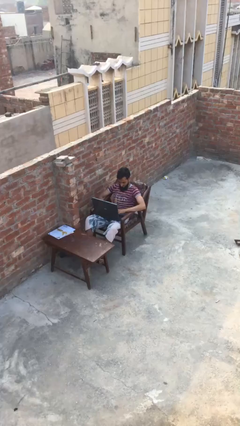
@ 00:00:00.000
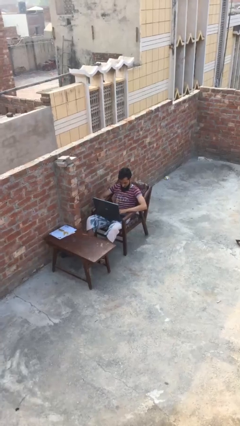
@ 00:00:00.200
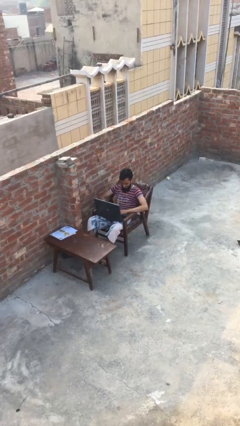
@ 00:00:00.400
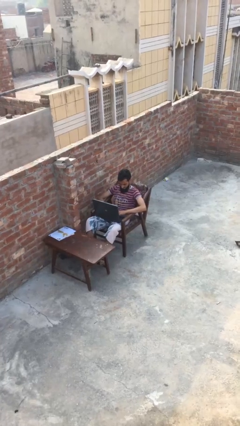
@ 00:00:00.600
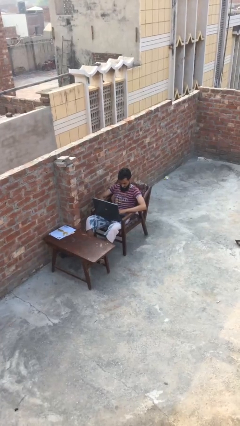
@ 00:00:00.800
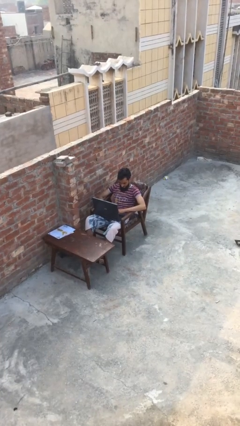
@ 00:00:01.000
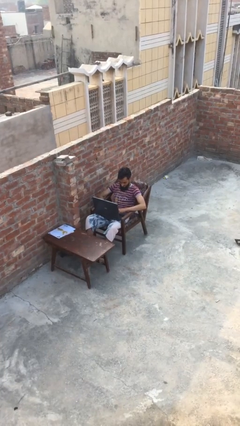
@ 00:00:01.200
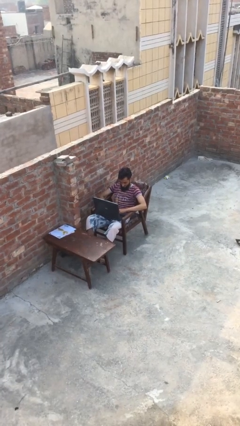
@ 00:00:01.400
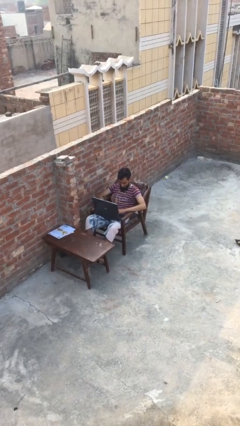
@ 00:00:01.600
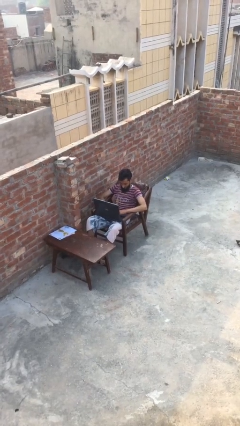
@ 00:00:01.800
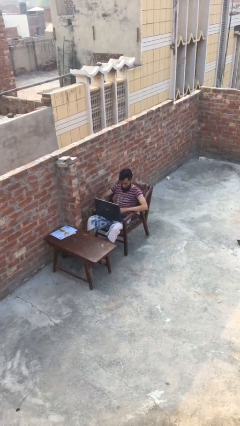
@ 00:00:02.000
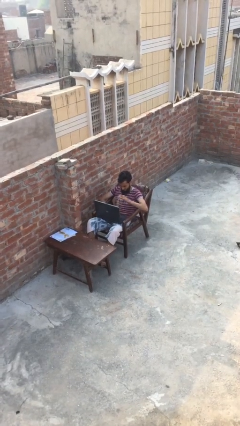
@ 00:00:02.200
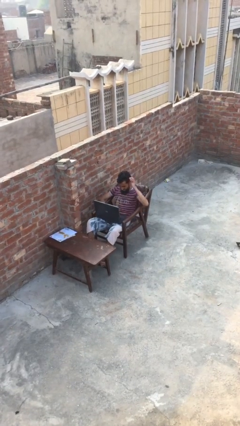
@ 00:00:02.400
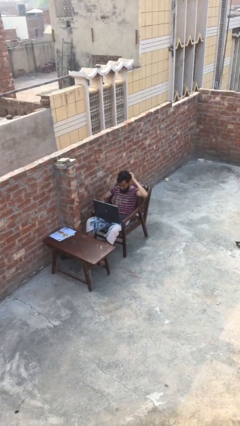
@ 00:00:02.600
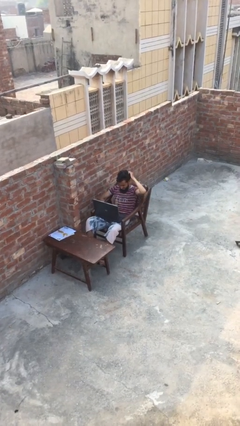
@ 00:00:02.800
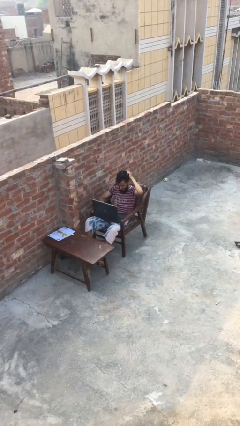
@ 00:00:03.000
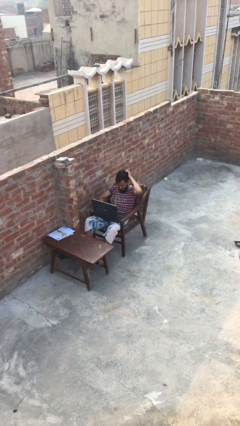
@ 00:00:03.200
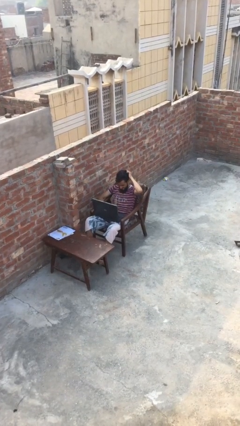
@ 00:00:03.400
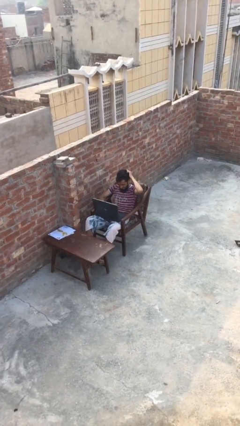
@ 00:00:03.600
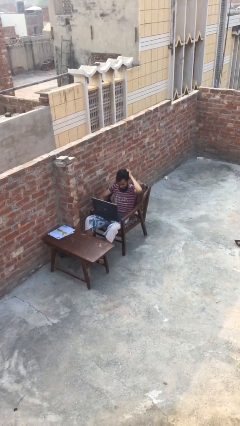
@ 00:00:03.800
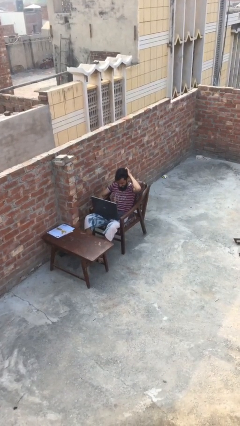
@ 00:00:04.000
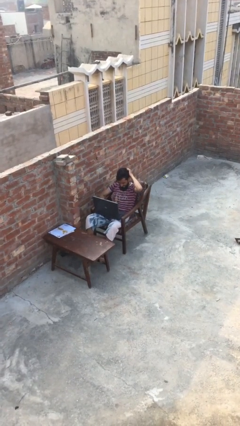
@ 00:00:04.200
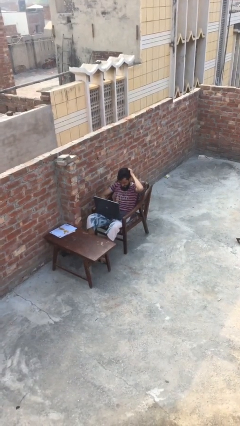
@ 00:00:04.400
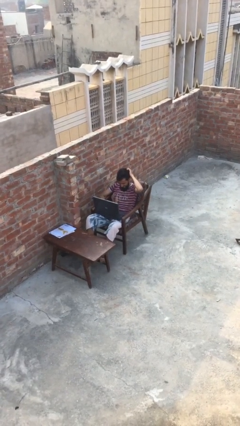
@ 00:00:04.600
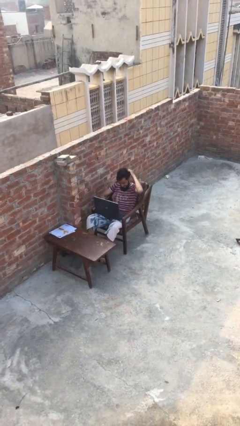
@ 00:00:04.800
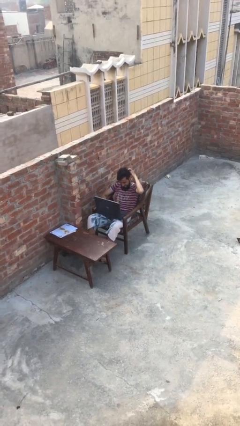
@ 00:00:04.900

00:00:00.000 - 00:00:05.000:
person interacts with laptop

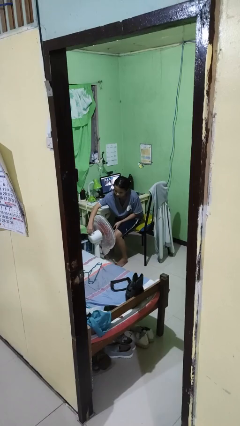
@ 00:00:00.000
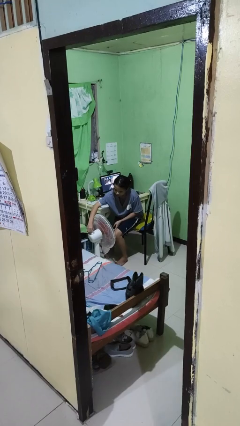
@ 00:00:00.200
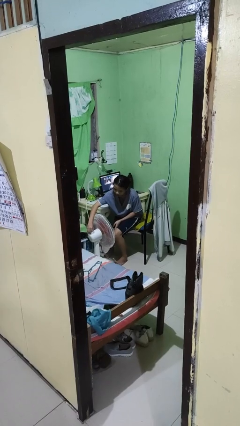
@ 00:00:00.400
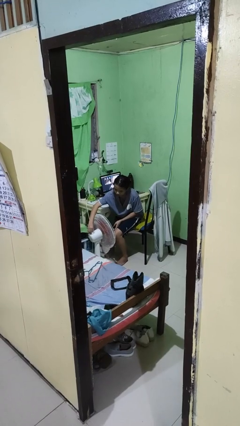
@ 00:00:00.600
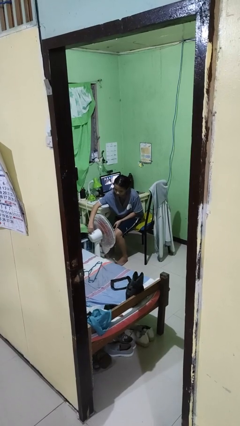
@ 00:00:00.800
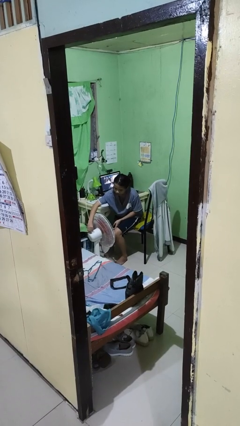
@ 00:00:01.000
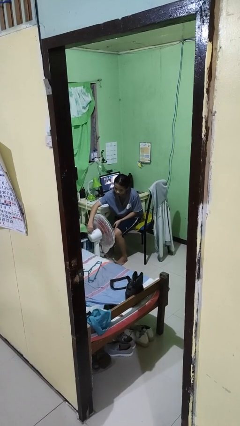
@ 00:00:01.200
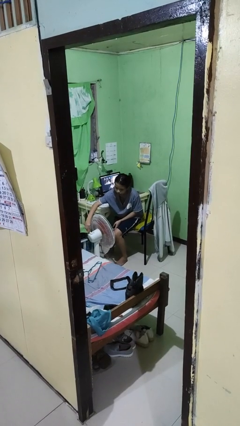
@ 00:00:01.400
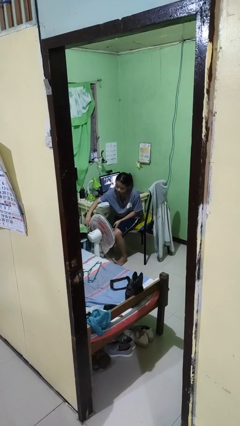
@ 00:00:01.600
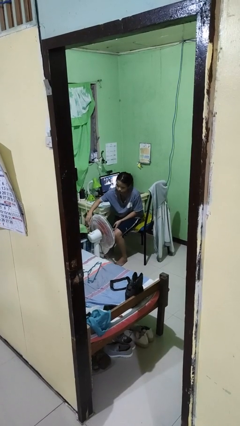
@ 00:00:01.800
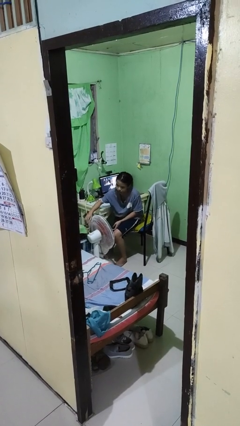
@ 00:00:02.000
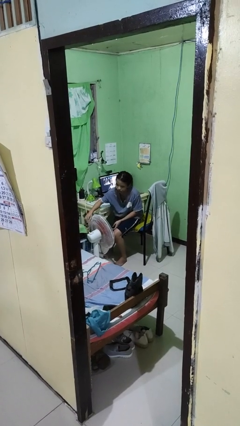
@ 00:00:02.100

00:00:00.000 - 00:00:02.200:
person turns off fan

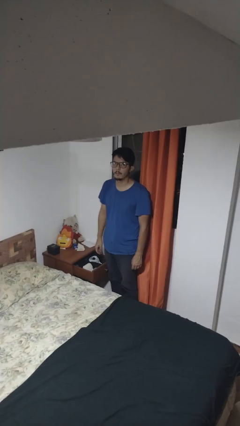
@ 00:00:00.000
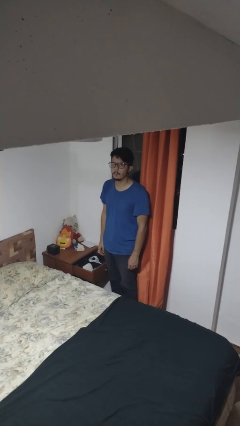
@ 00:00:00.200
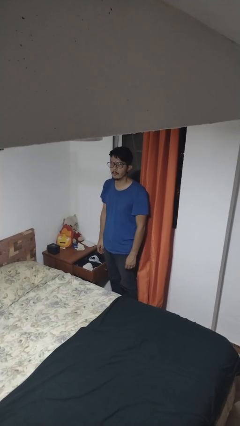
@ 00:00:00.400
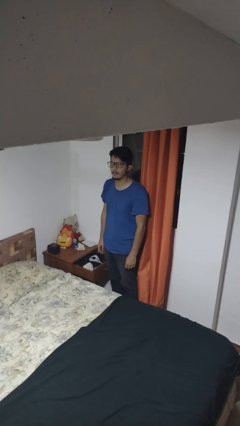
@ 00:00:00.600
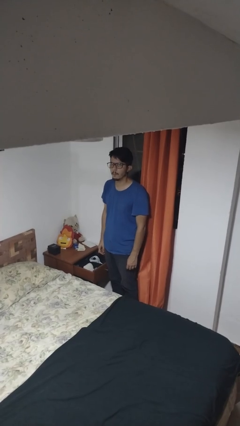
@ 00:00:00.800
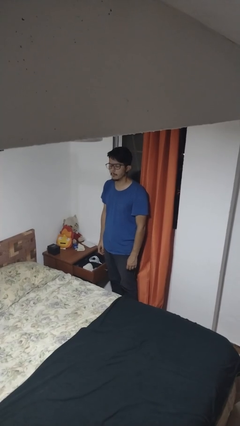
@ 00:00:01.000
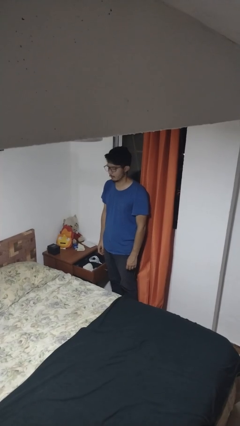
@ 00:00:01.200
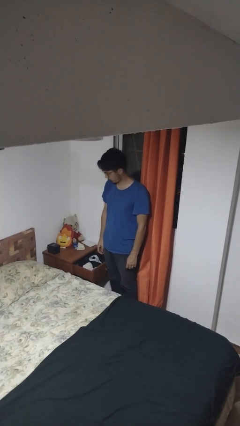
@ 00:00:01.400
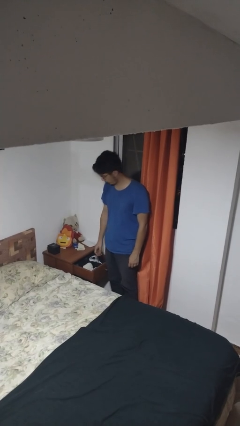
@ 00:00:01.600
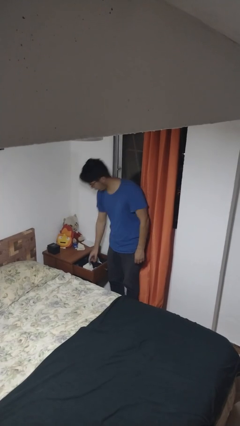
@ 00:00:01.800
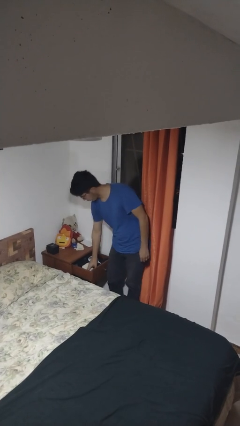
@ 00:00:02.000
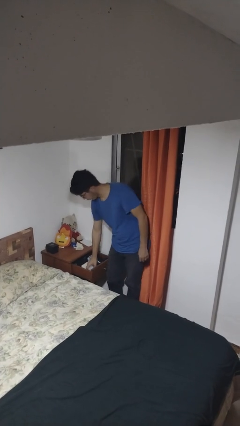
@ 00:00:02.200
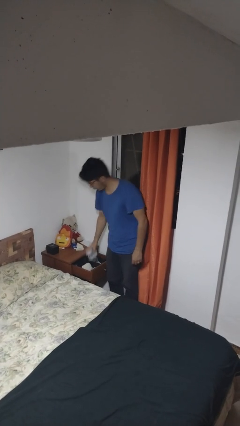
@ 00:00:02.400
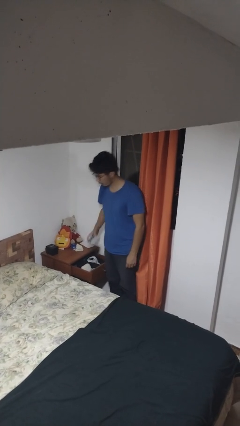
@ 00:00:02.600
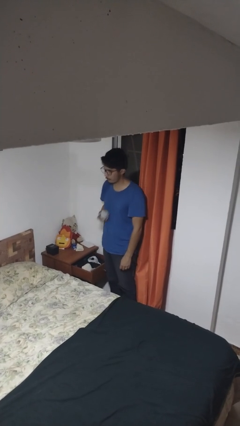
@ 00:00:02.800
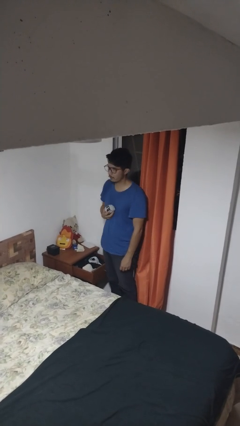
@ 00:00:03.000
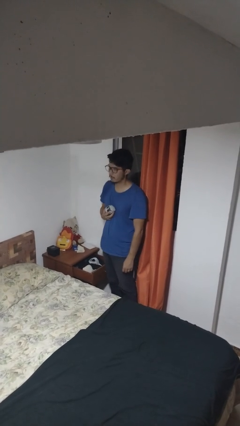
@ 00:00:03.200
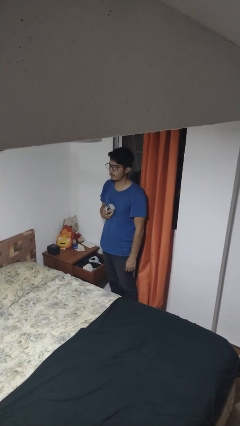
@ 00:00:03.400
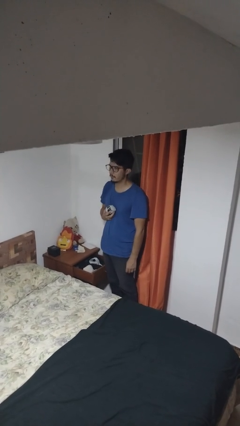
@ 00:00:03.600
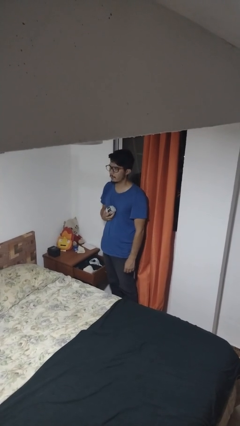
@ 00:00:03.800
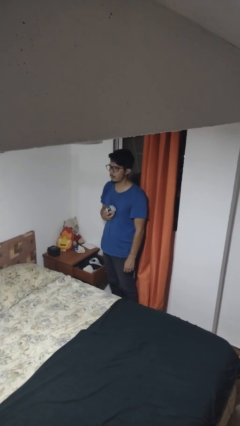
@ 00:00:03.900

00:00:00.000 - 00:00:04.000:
person takes clothes from dresser

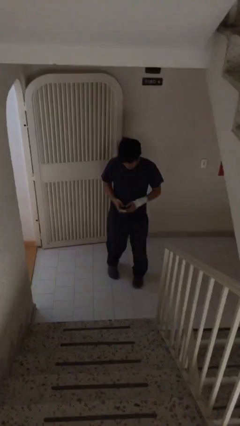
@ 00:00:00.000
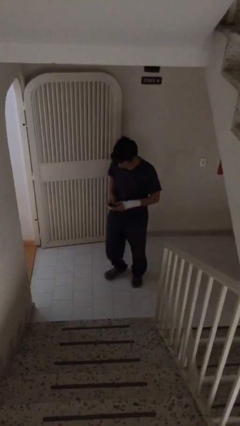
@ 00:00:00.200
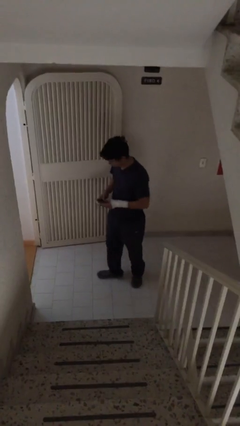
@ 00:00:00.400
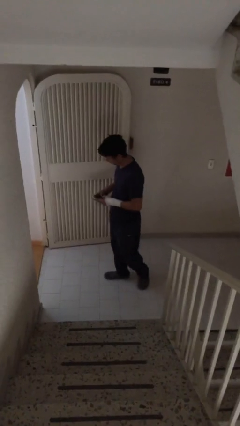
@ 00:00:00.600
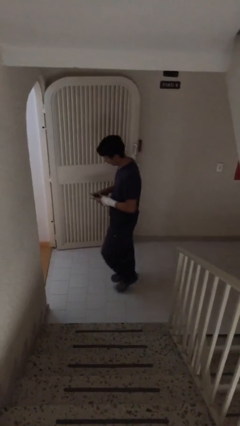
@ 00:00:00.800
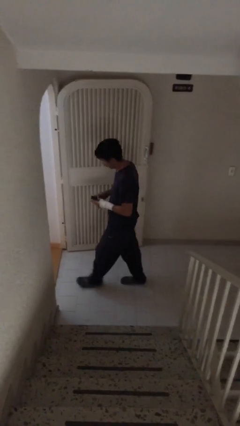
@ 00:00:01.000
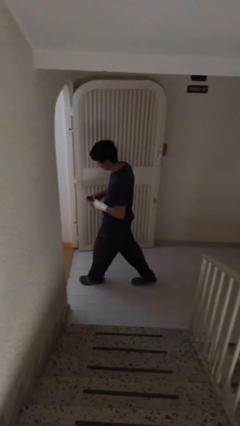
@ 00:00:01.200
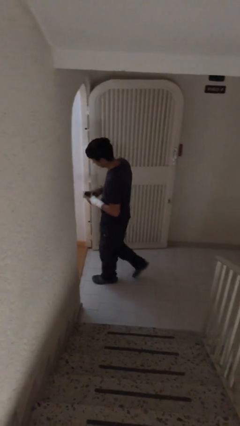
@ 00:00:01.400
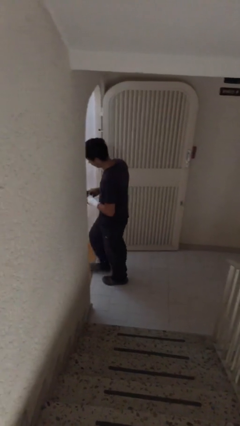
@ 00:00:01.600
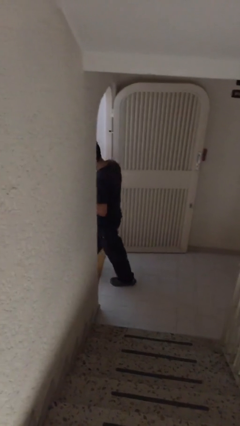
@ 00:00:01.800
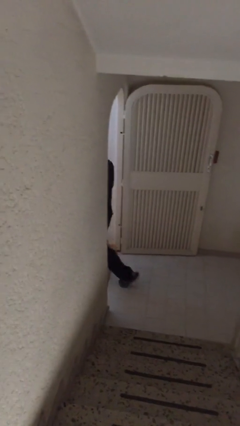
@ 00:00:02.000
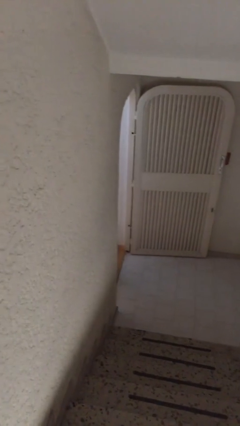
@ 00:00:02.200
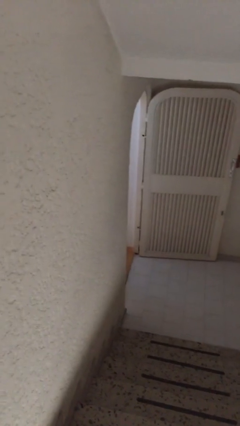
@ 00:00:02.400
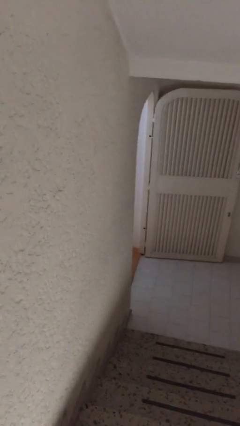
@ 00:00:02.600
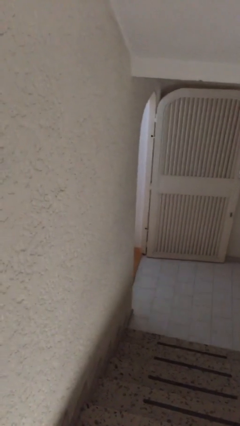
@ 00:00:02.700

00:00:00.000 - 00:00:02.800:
person exits scene through structure

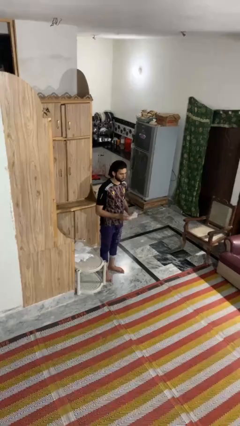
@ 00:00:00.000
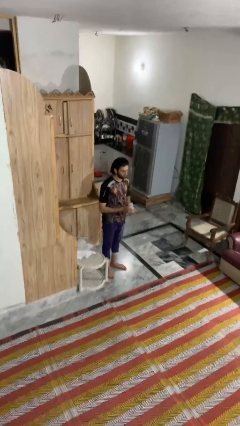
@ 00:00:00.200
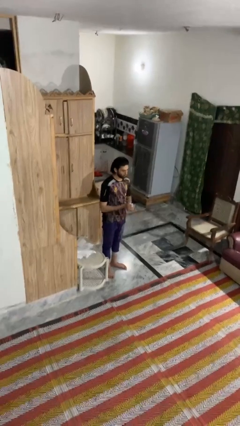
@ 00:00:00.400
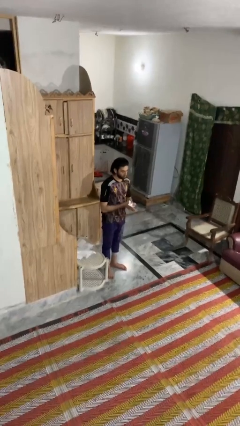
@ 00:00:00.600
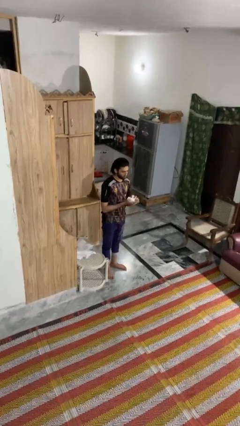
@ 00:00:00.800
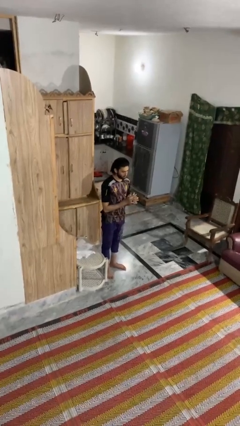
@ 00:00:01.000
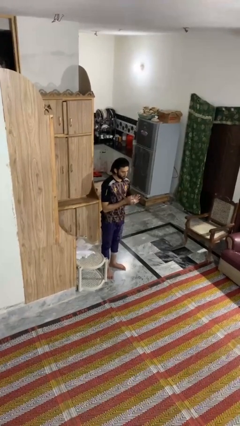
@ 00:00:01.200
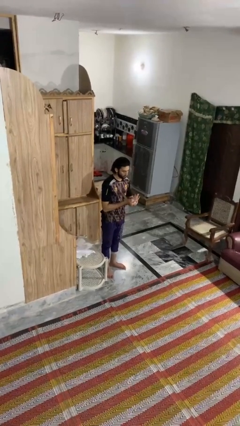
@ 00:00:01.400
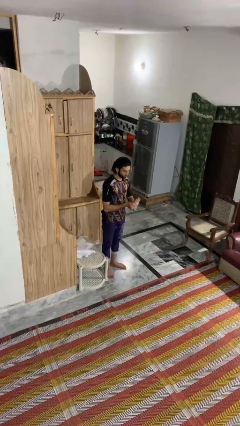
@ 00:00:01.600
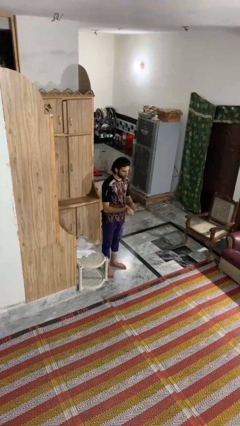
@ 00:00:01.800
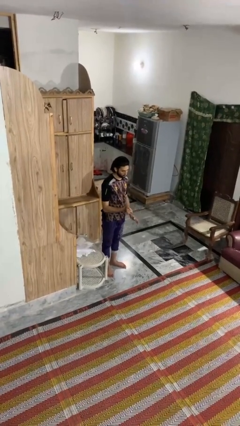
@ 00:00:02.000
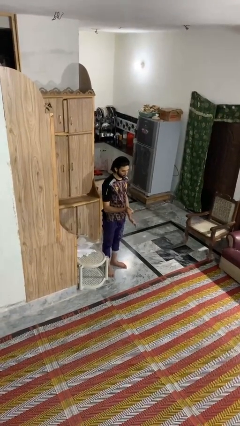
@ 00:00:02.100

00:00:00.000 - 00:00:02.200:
person crumples paper

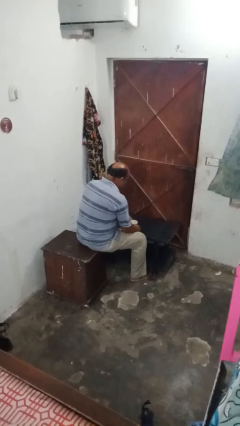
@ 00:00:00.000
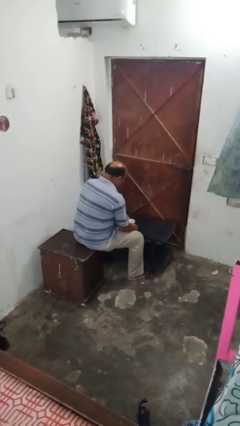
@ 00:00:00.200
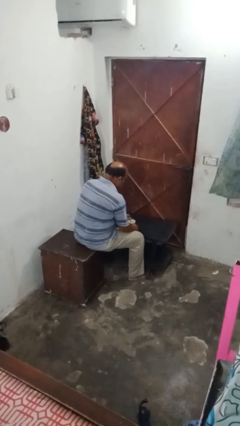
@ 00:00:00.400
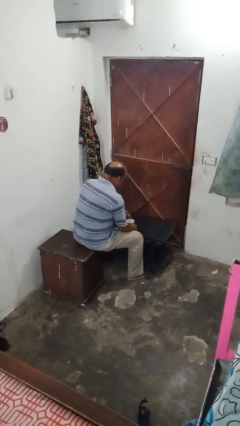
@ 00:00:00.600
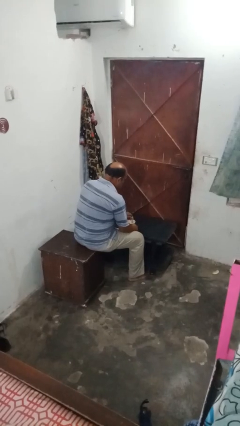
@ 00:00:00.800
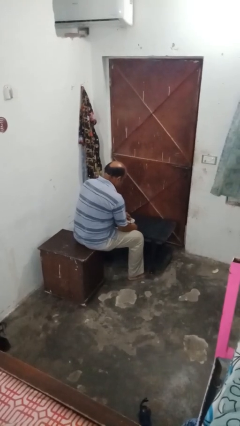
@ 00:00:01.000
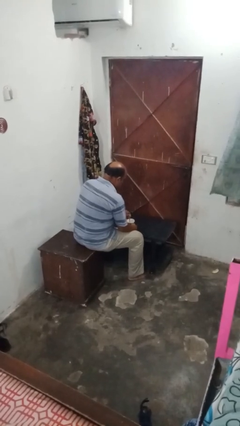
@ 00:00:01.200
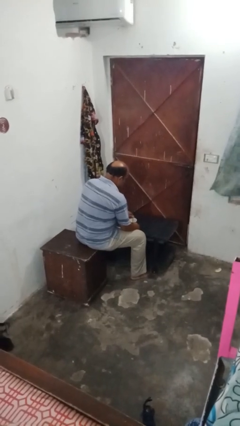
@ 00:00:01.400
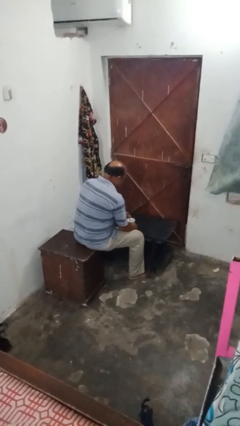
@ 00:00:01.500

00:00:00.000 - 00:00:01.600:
person stirs mug
